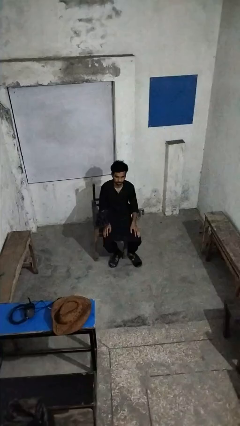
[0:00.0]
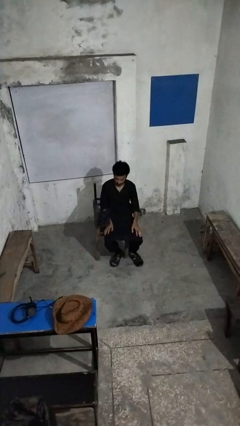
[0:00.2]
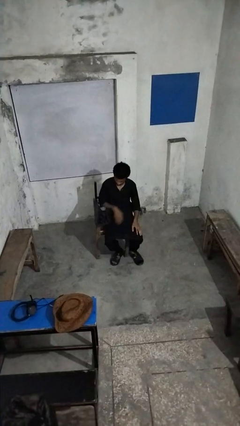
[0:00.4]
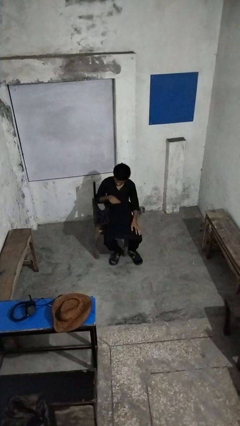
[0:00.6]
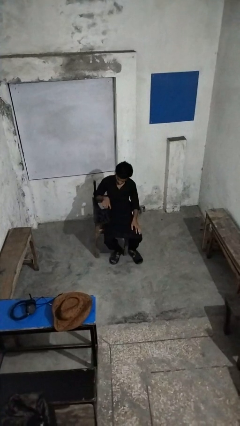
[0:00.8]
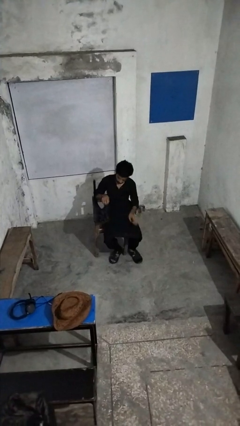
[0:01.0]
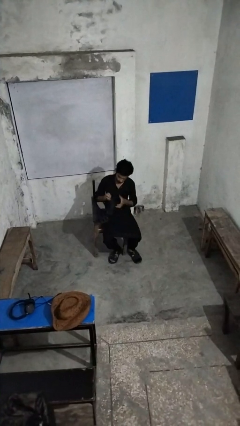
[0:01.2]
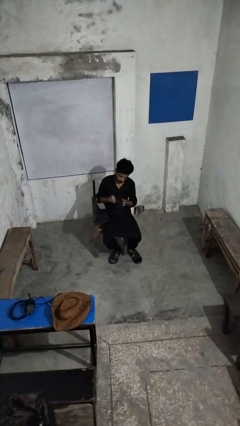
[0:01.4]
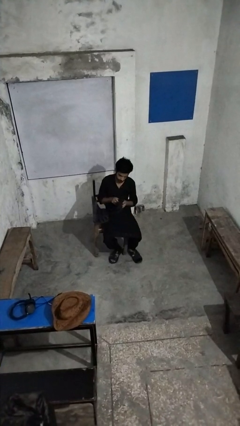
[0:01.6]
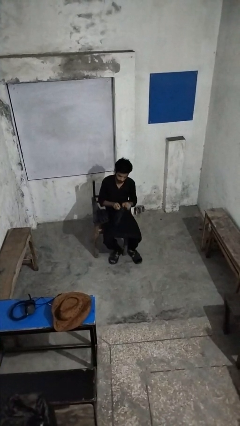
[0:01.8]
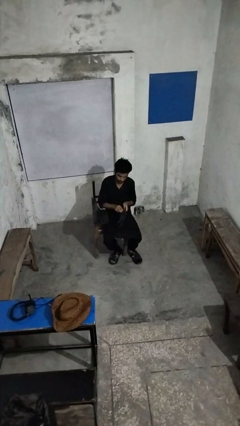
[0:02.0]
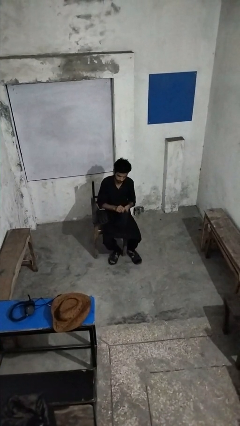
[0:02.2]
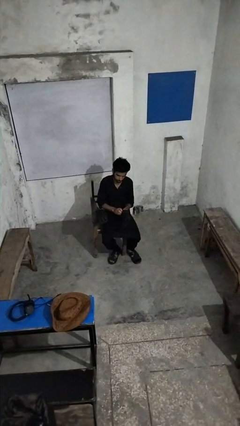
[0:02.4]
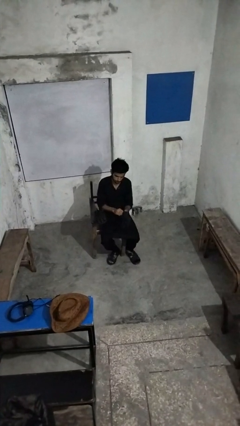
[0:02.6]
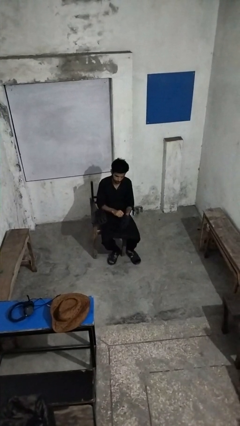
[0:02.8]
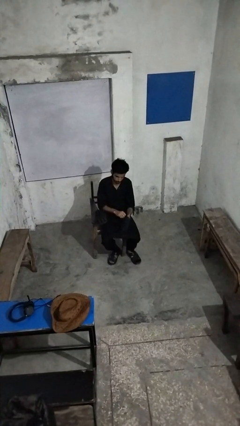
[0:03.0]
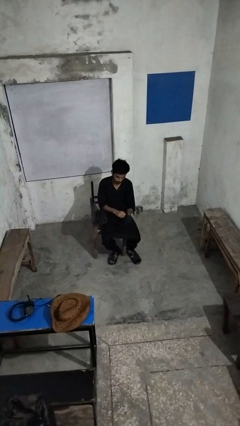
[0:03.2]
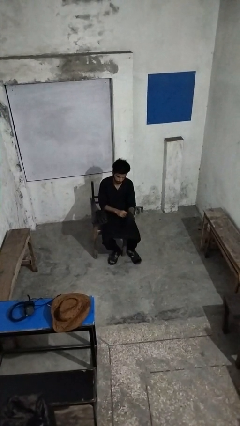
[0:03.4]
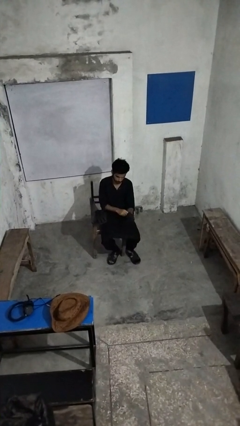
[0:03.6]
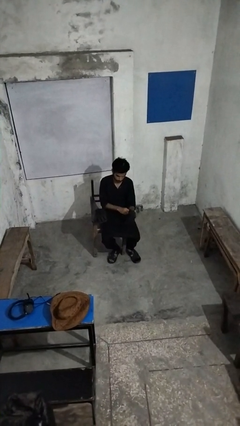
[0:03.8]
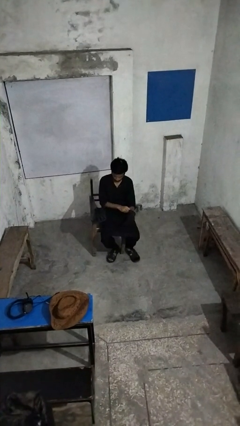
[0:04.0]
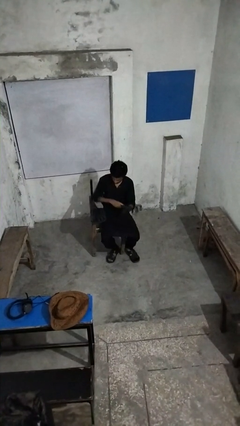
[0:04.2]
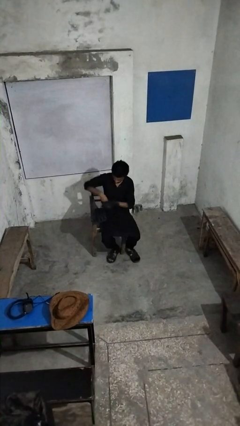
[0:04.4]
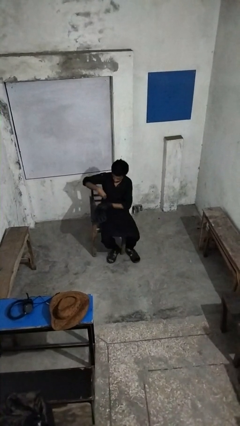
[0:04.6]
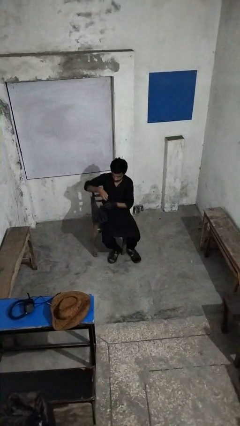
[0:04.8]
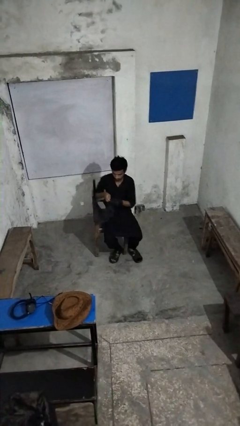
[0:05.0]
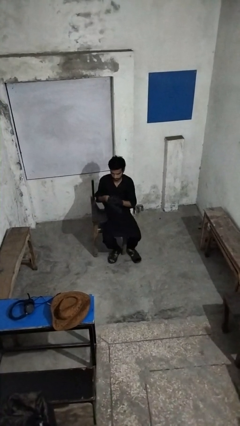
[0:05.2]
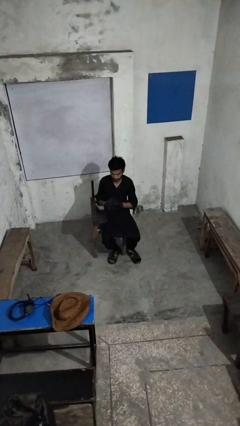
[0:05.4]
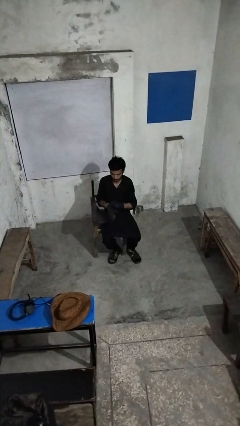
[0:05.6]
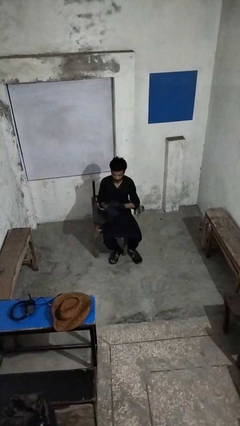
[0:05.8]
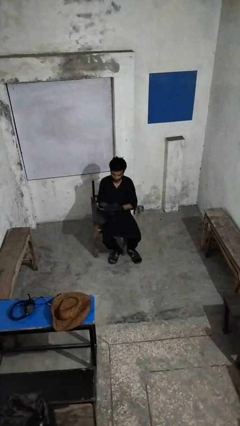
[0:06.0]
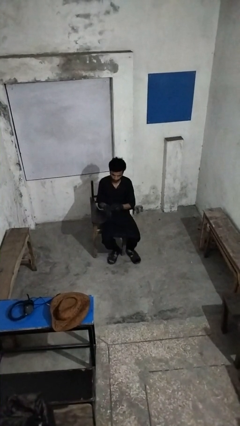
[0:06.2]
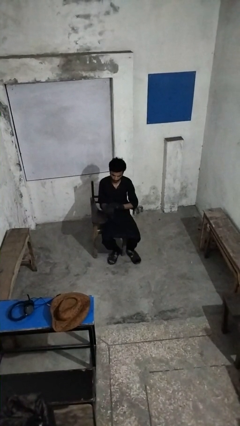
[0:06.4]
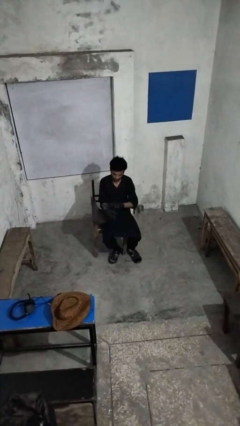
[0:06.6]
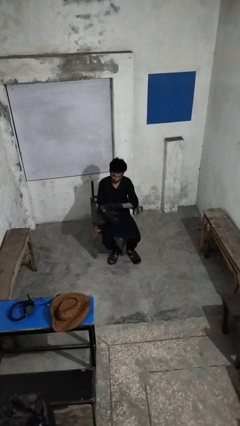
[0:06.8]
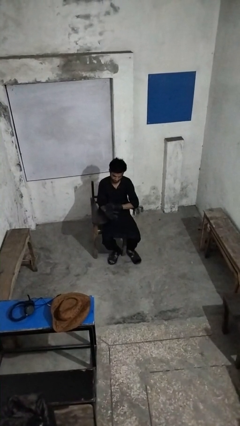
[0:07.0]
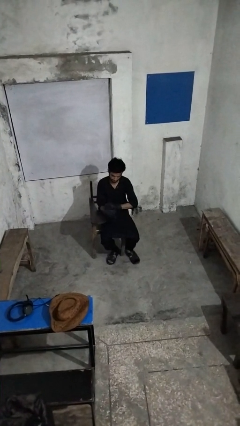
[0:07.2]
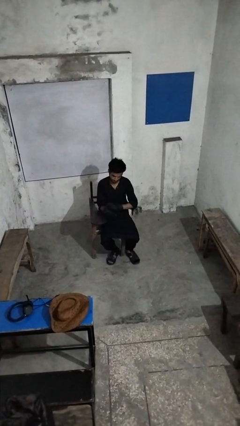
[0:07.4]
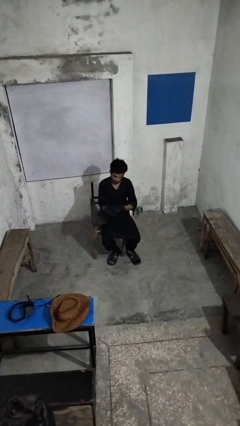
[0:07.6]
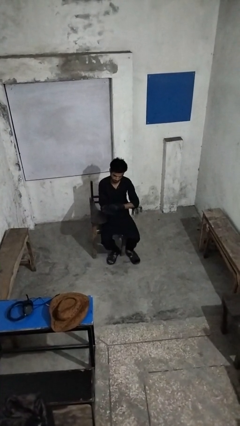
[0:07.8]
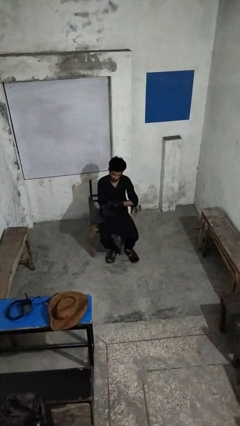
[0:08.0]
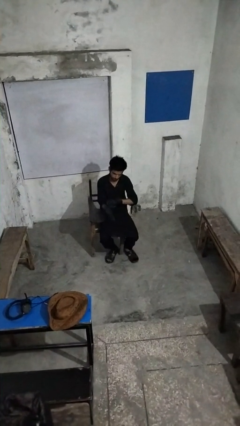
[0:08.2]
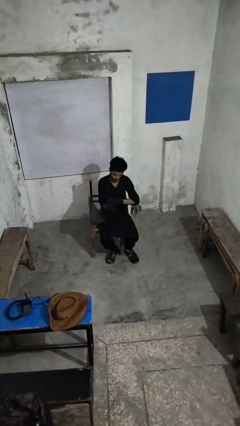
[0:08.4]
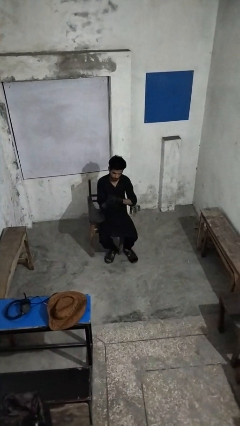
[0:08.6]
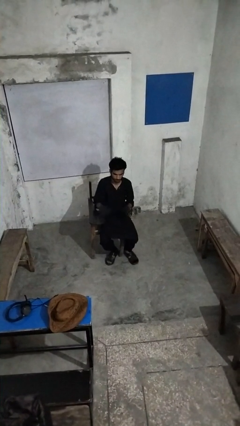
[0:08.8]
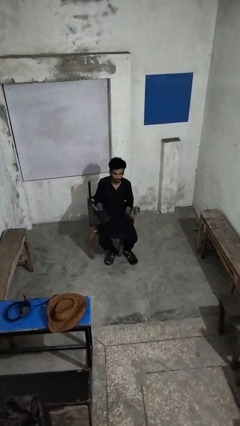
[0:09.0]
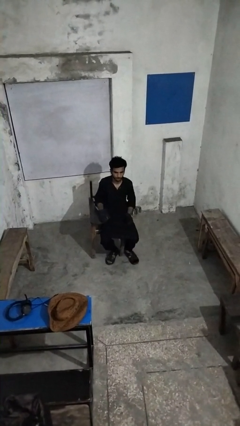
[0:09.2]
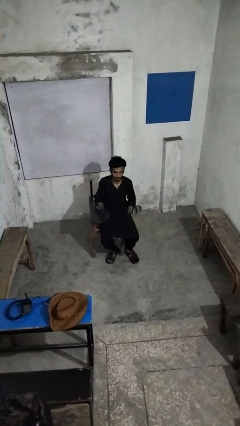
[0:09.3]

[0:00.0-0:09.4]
person puts on gloves

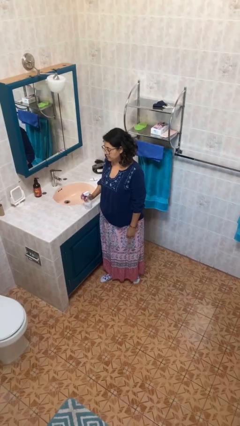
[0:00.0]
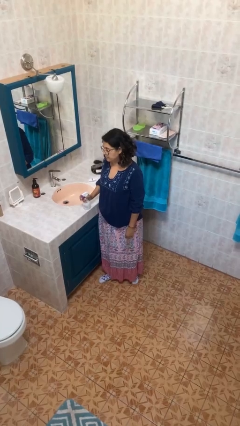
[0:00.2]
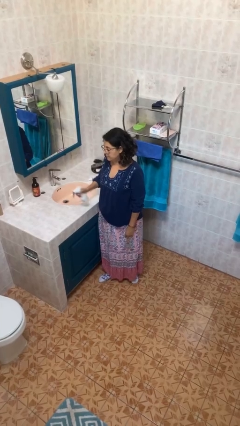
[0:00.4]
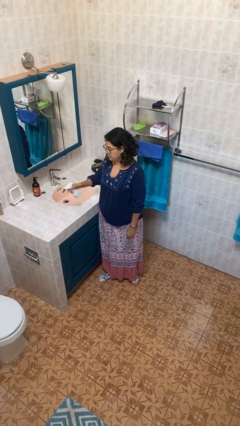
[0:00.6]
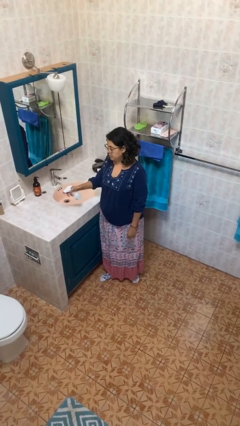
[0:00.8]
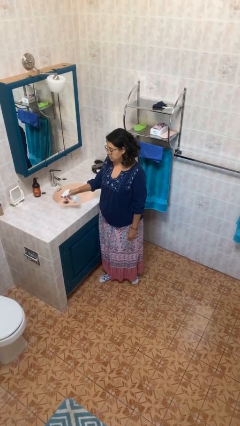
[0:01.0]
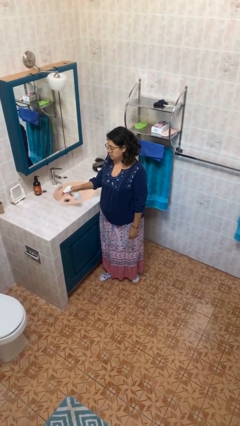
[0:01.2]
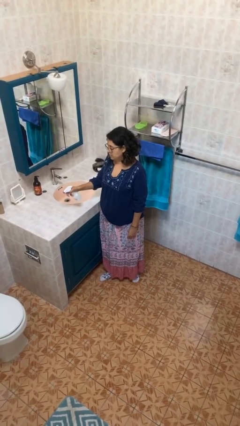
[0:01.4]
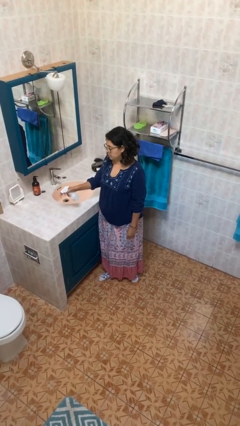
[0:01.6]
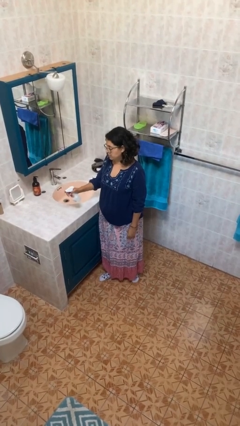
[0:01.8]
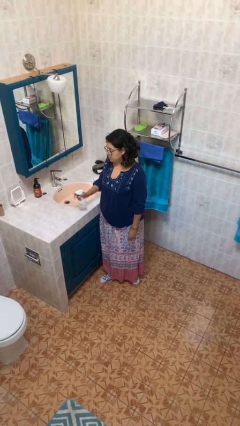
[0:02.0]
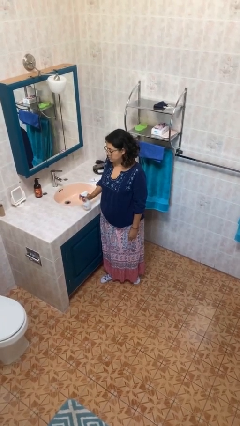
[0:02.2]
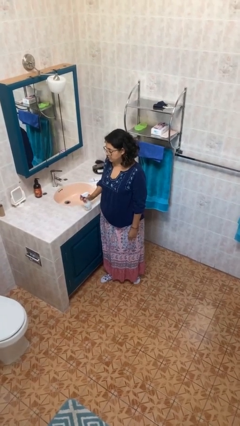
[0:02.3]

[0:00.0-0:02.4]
person sprays from bottle

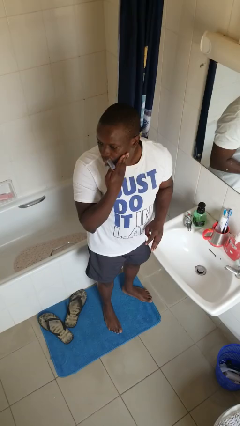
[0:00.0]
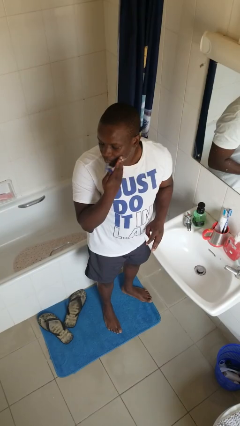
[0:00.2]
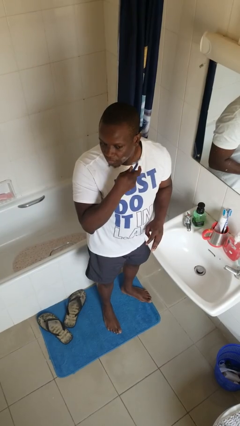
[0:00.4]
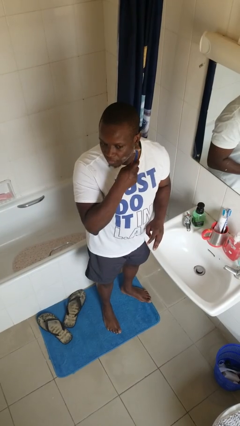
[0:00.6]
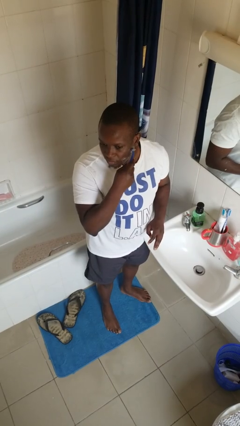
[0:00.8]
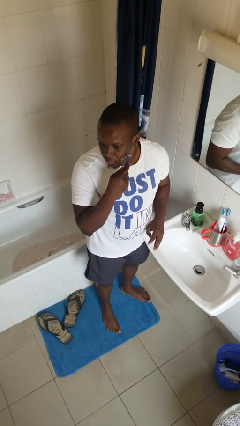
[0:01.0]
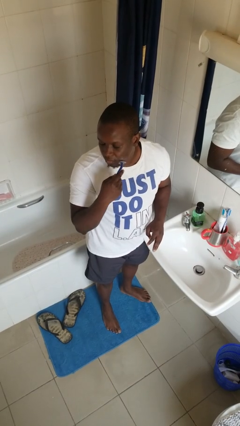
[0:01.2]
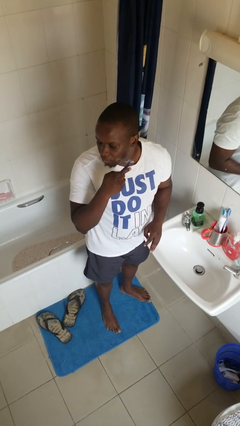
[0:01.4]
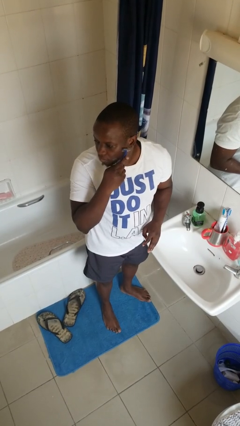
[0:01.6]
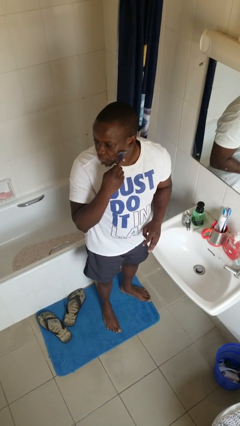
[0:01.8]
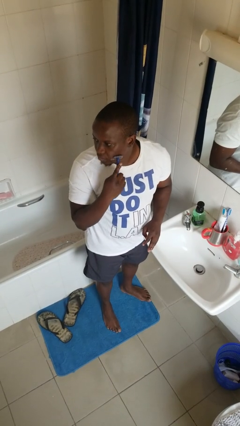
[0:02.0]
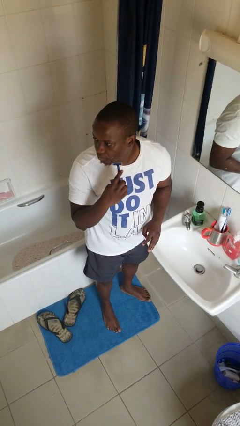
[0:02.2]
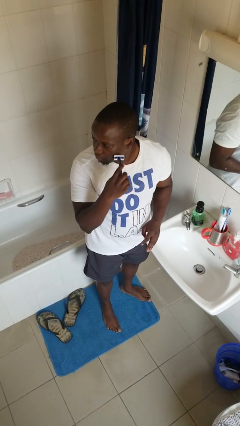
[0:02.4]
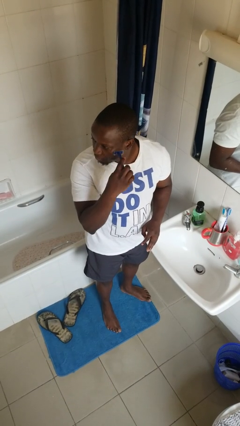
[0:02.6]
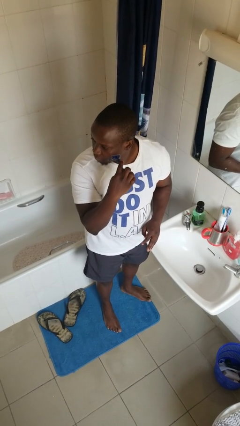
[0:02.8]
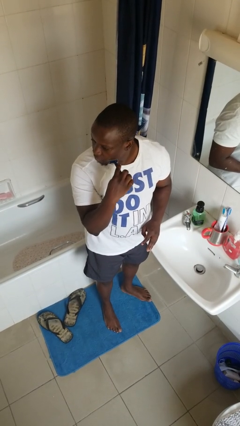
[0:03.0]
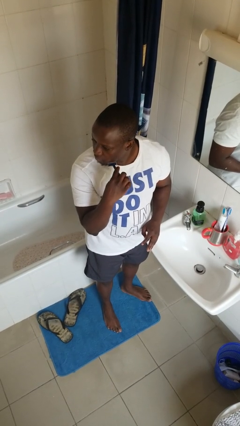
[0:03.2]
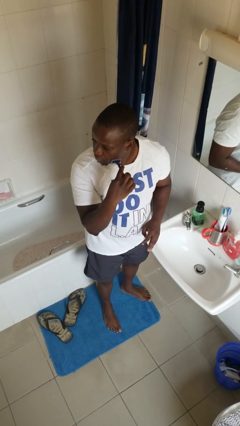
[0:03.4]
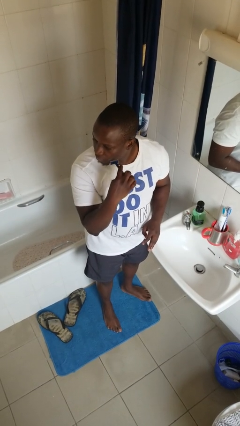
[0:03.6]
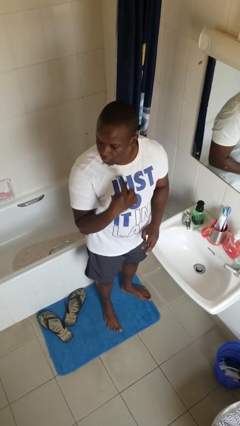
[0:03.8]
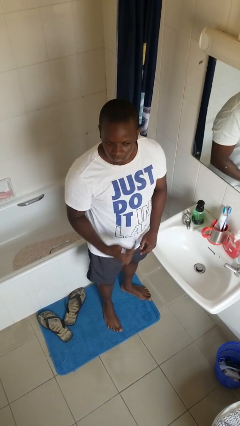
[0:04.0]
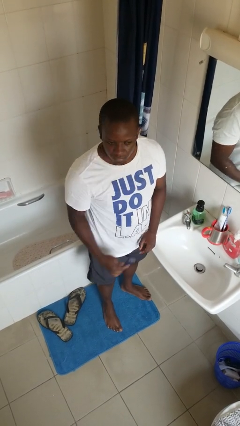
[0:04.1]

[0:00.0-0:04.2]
person shaves face

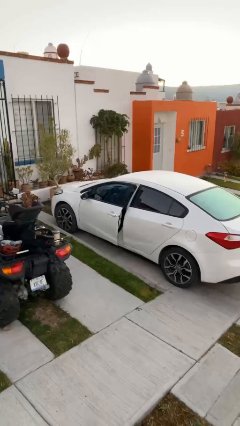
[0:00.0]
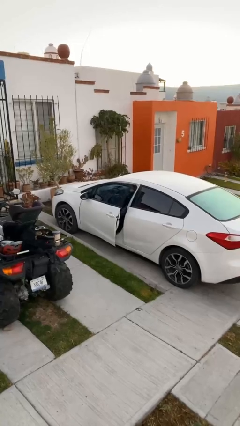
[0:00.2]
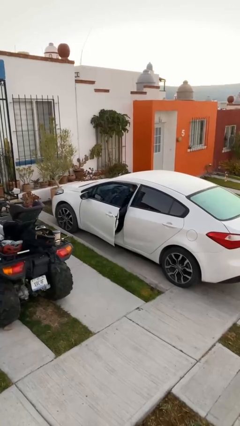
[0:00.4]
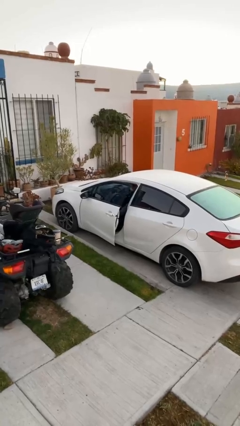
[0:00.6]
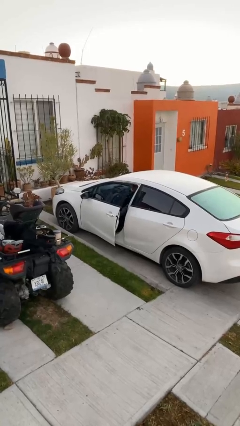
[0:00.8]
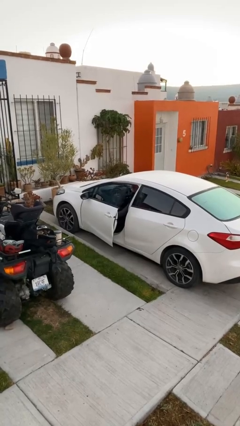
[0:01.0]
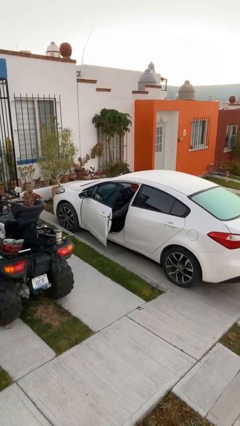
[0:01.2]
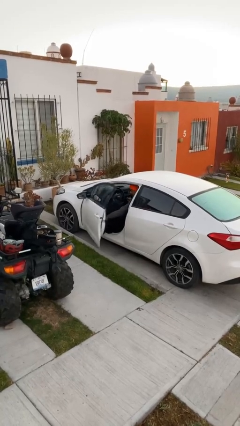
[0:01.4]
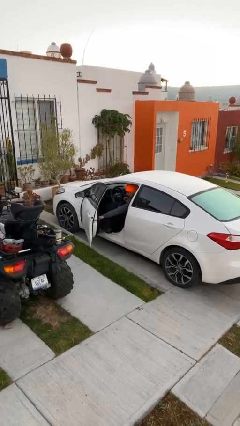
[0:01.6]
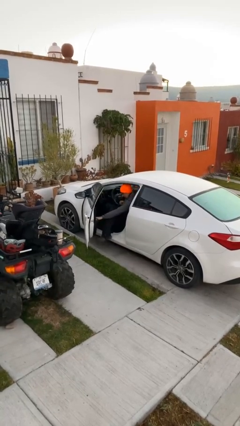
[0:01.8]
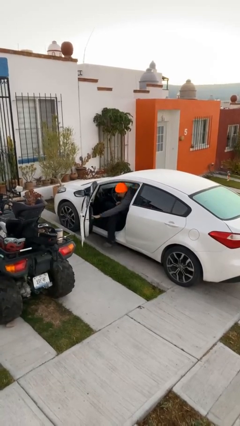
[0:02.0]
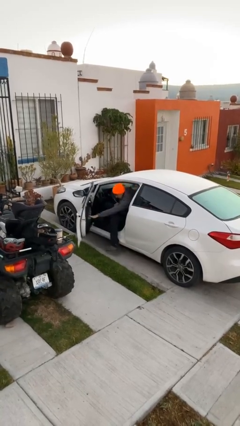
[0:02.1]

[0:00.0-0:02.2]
person opens car door
